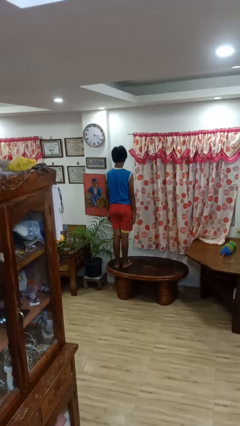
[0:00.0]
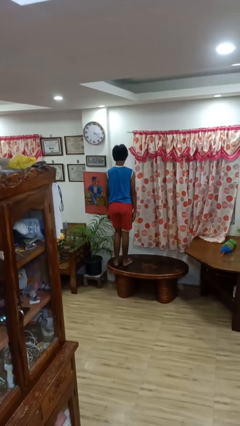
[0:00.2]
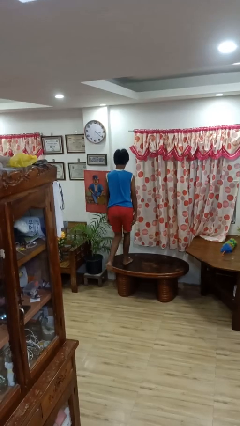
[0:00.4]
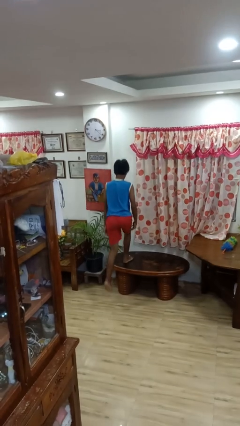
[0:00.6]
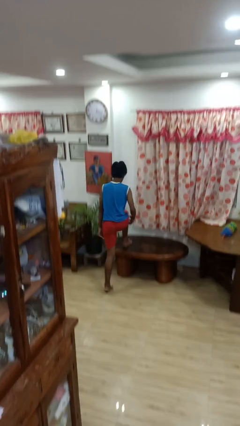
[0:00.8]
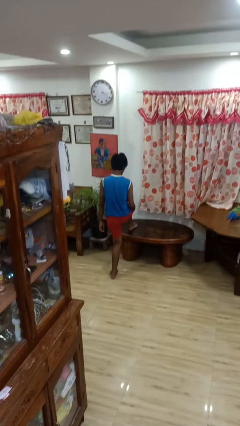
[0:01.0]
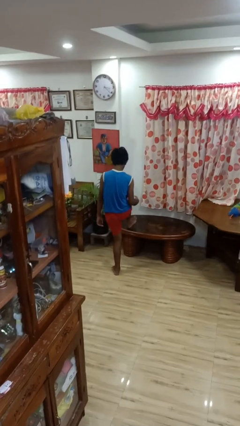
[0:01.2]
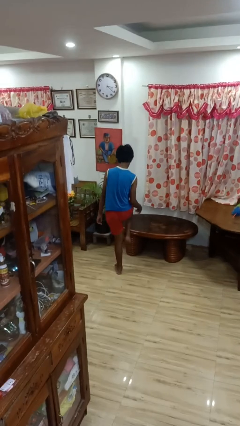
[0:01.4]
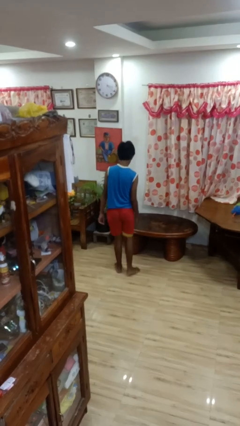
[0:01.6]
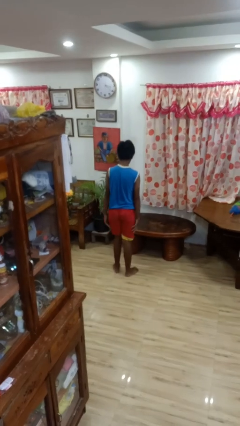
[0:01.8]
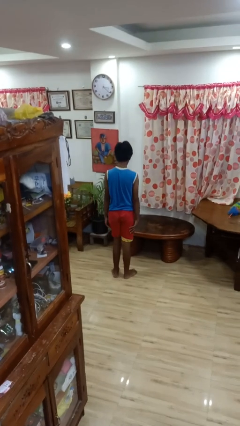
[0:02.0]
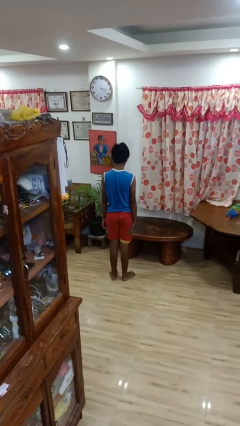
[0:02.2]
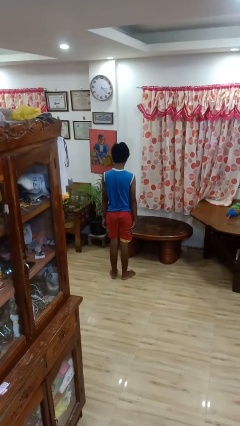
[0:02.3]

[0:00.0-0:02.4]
person climbs off table

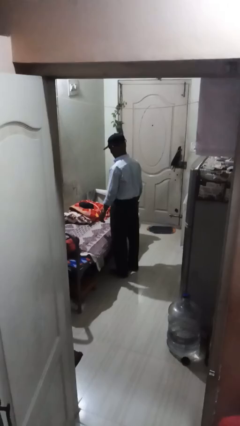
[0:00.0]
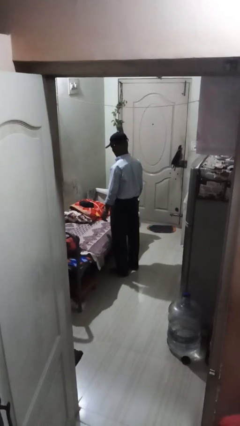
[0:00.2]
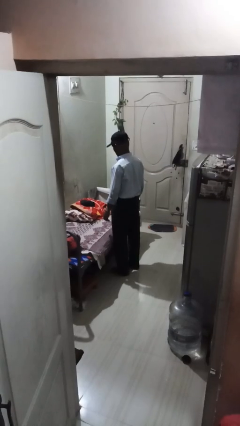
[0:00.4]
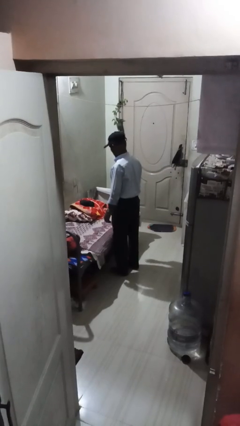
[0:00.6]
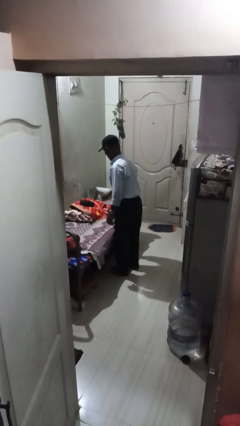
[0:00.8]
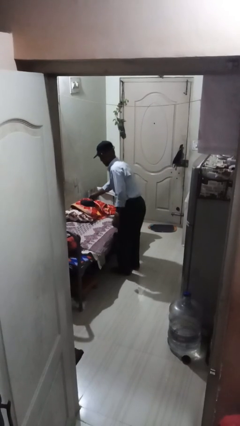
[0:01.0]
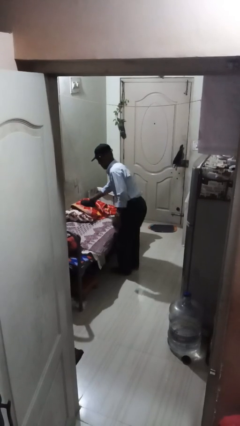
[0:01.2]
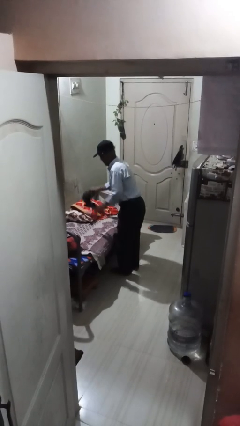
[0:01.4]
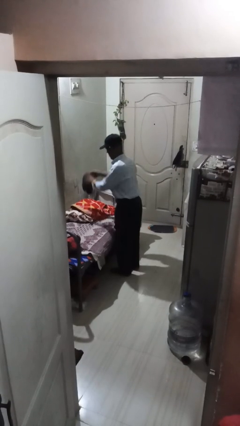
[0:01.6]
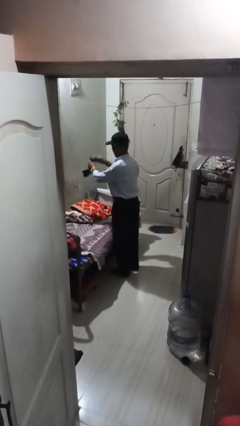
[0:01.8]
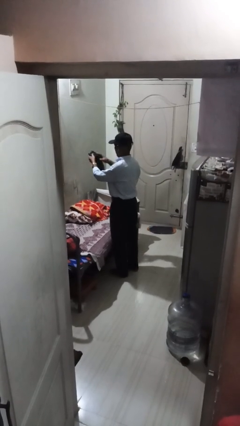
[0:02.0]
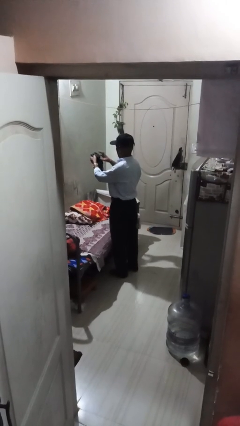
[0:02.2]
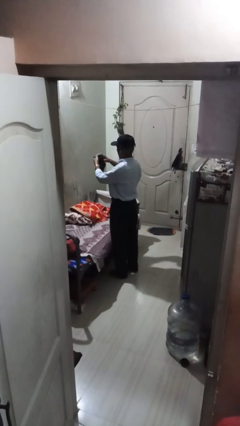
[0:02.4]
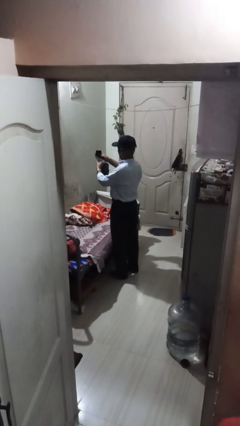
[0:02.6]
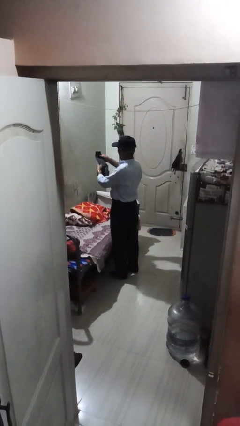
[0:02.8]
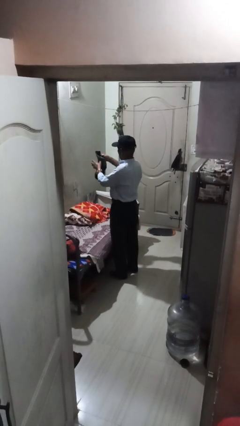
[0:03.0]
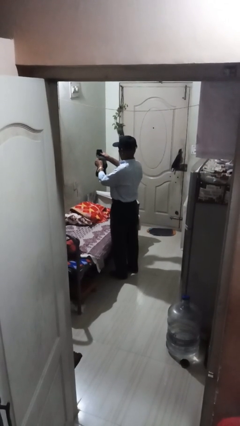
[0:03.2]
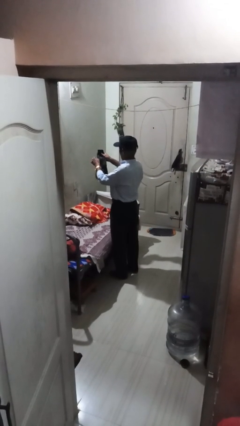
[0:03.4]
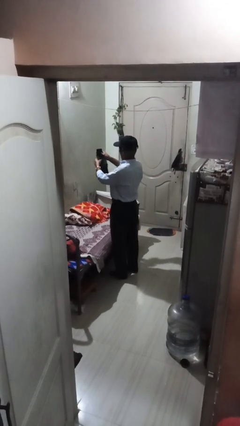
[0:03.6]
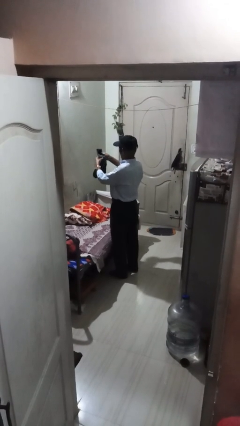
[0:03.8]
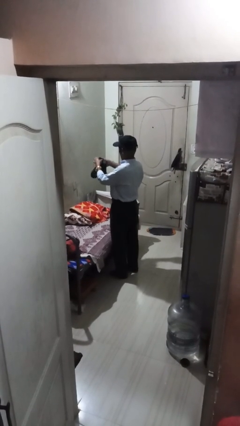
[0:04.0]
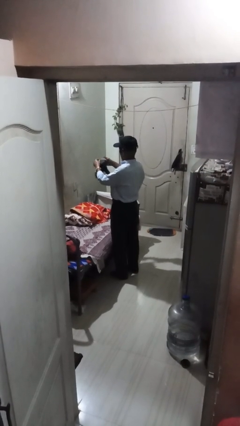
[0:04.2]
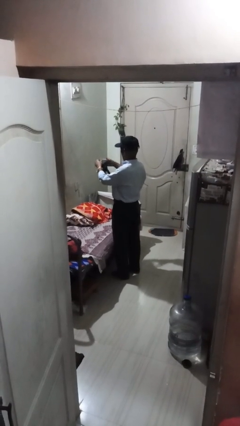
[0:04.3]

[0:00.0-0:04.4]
person folds socks

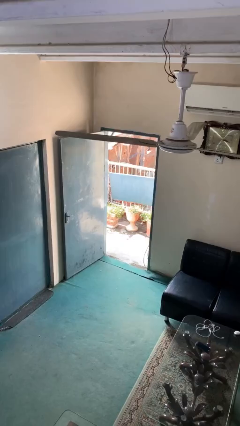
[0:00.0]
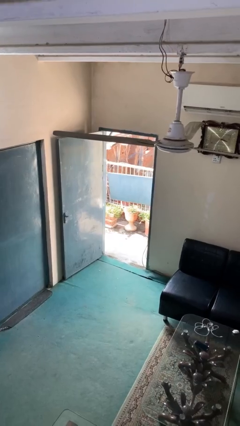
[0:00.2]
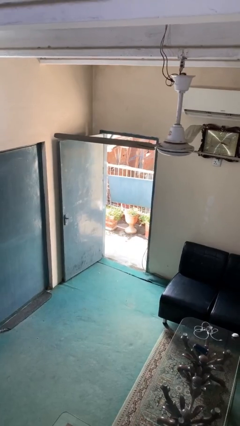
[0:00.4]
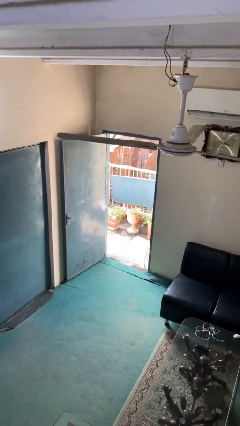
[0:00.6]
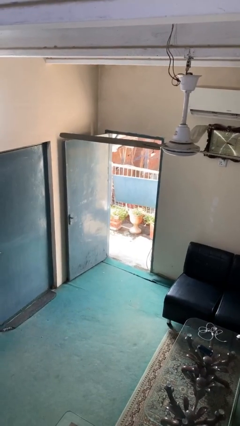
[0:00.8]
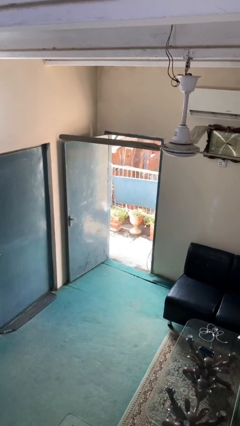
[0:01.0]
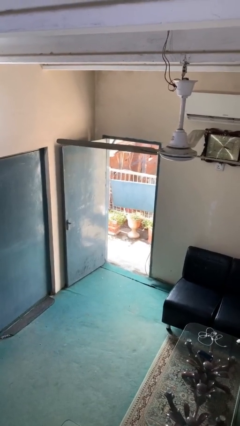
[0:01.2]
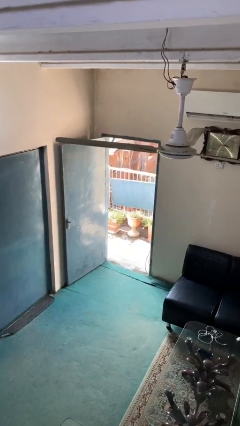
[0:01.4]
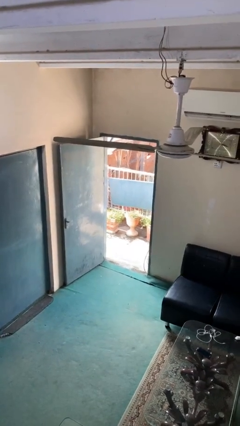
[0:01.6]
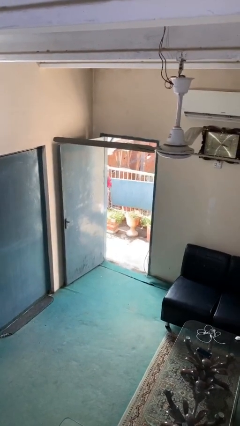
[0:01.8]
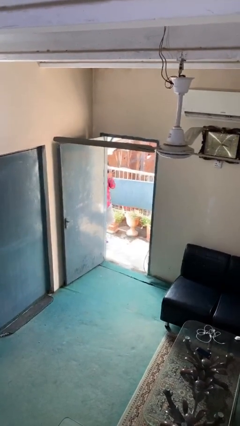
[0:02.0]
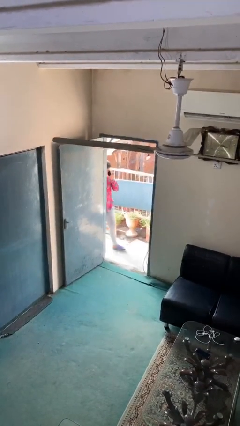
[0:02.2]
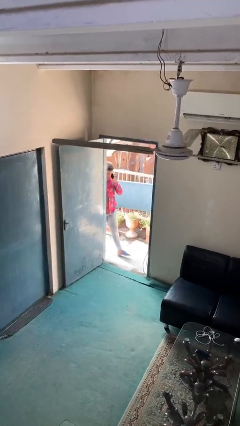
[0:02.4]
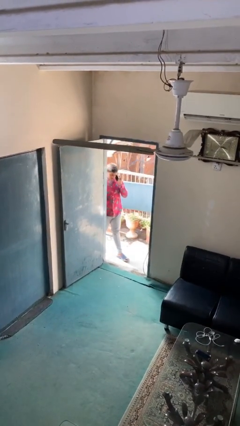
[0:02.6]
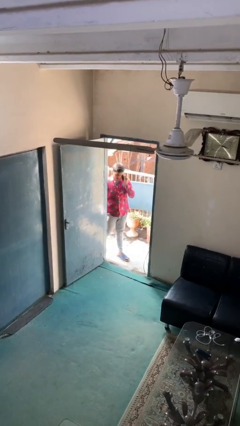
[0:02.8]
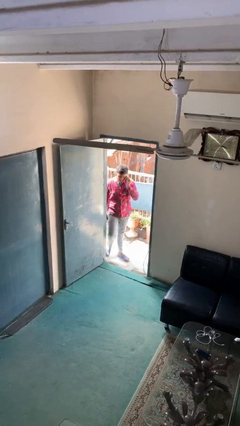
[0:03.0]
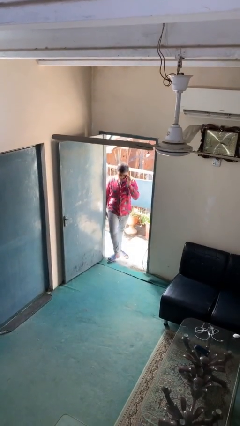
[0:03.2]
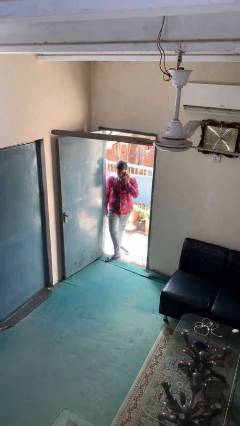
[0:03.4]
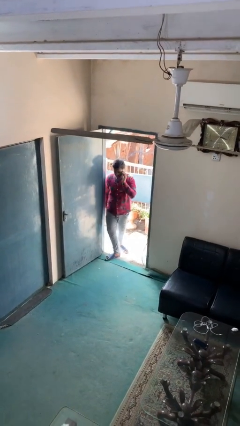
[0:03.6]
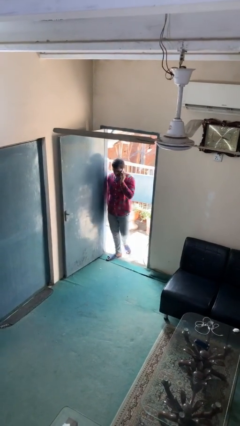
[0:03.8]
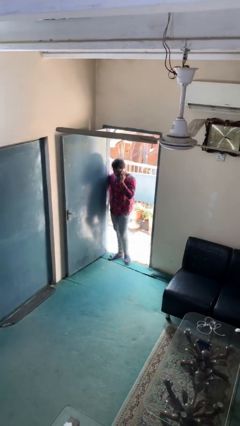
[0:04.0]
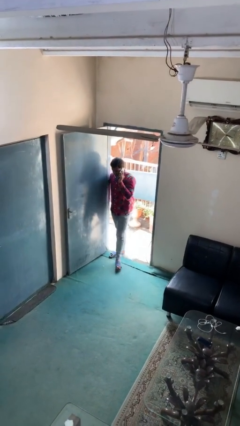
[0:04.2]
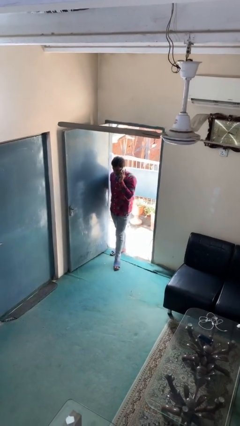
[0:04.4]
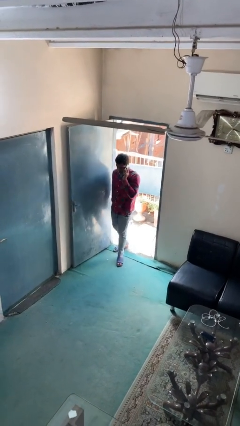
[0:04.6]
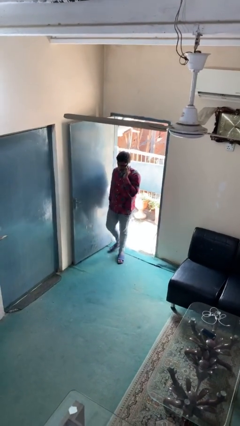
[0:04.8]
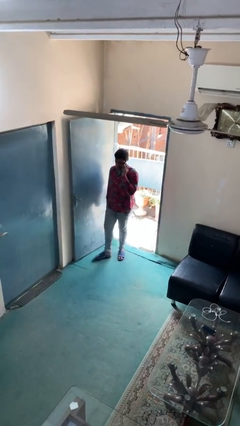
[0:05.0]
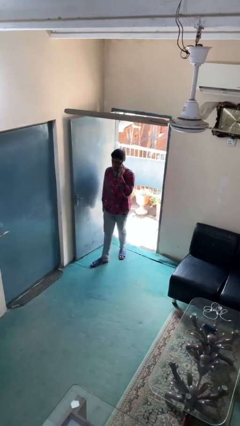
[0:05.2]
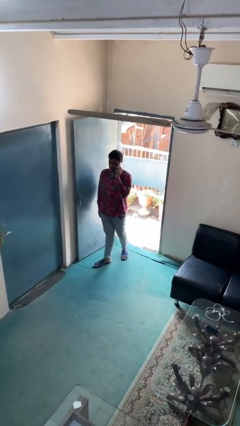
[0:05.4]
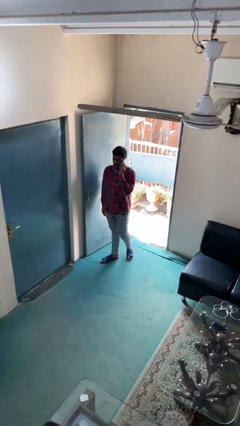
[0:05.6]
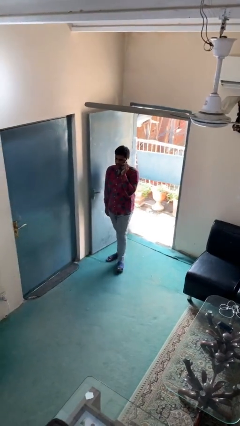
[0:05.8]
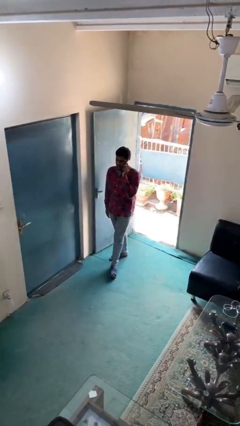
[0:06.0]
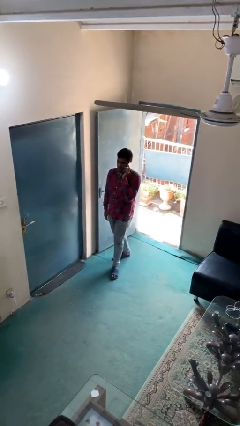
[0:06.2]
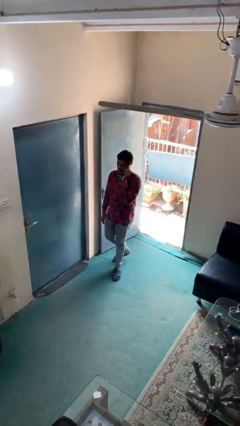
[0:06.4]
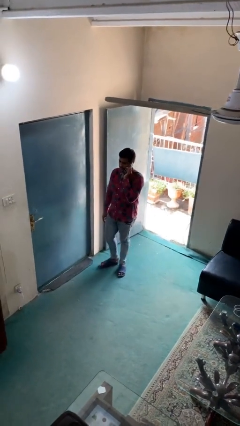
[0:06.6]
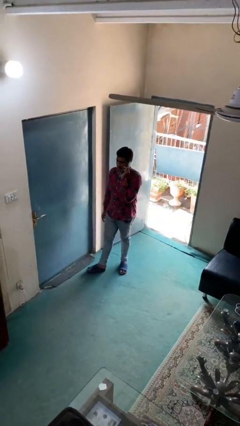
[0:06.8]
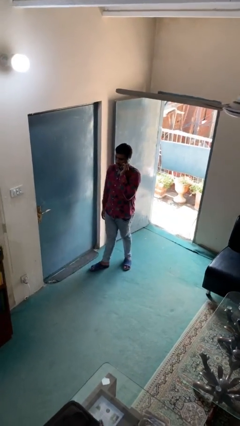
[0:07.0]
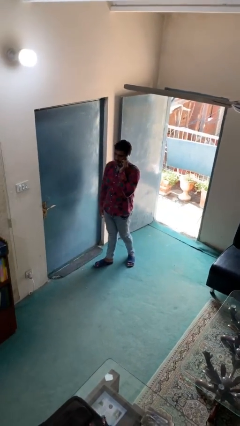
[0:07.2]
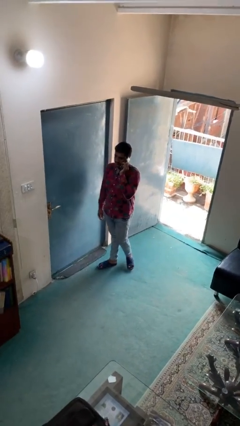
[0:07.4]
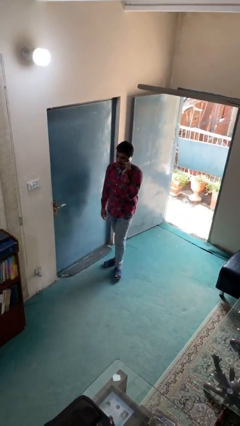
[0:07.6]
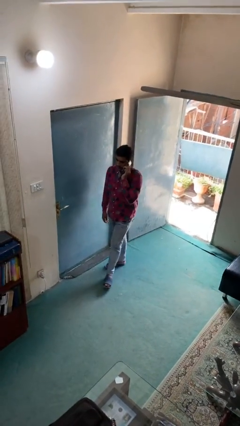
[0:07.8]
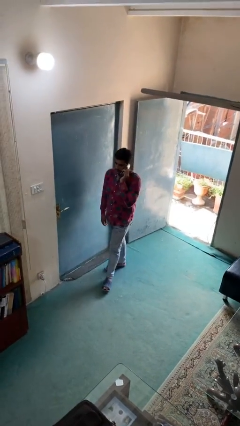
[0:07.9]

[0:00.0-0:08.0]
person enters scene through structure

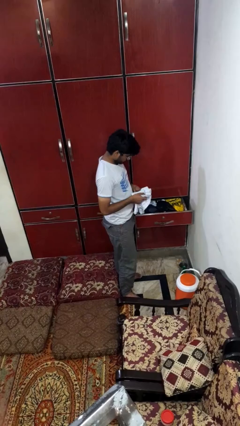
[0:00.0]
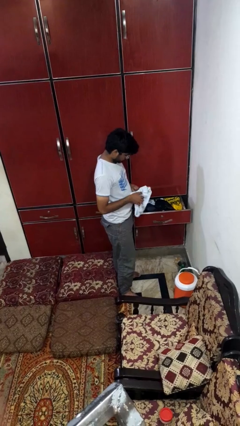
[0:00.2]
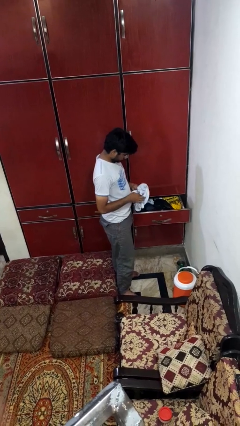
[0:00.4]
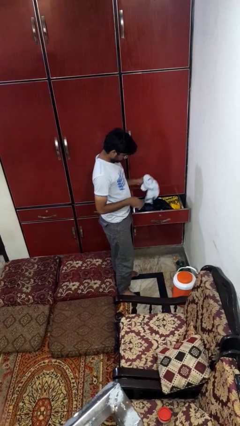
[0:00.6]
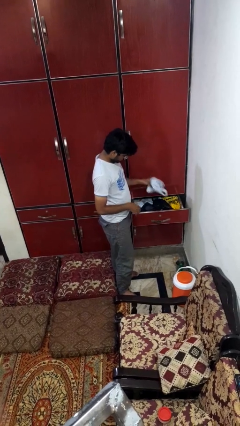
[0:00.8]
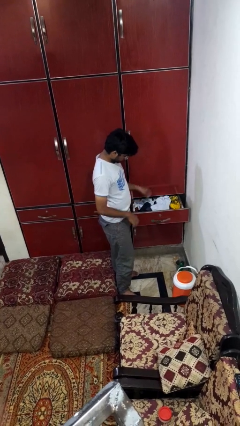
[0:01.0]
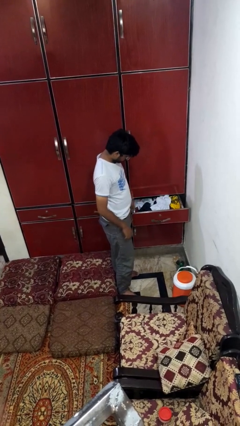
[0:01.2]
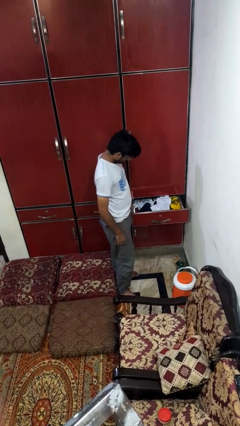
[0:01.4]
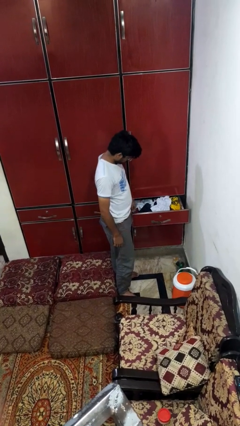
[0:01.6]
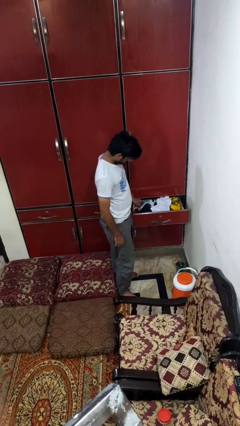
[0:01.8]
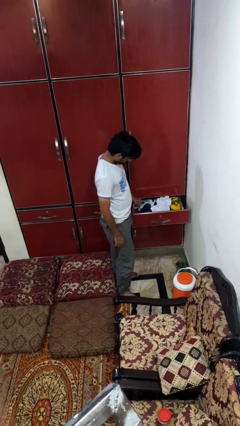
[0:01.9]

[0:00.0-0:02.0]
person puts clothes into dresser

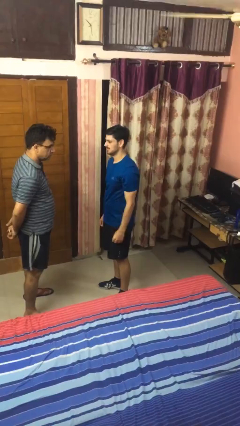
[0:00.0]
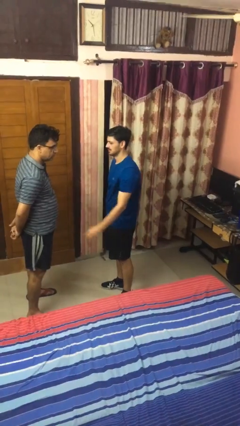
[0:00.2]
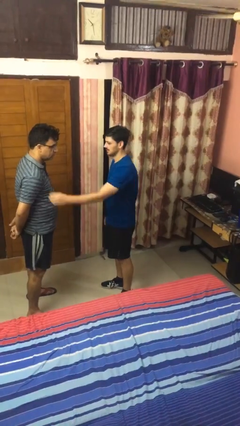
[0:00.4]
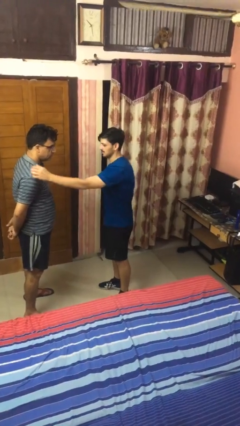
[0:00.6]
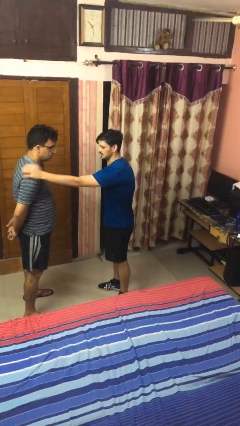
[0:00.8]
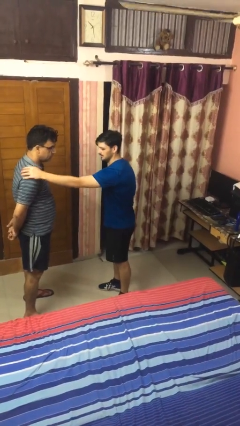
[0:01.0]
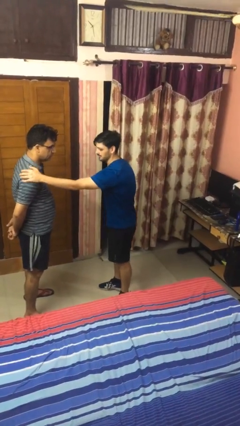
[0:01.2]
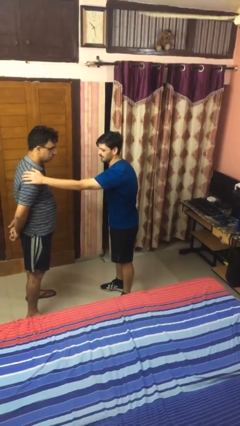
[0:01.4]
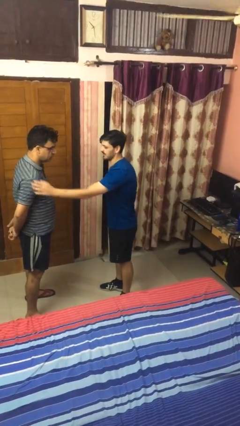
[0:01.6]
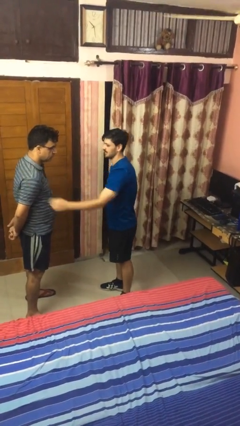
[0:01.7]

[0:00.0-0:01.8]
person pounds shoulders of person
